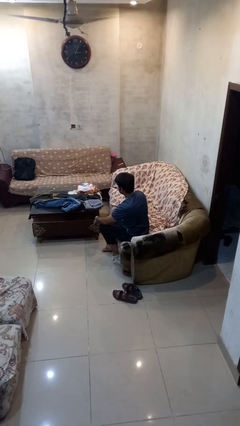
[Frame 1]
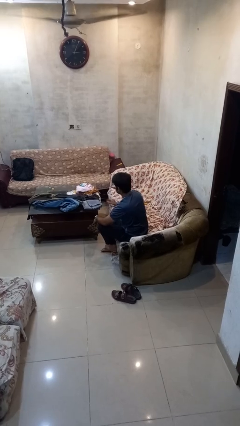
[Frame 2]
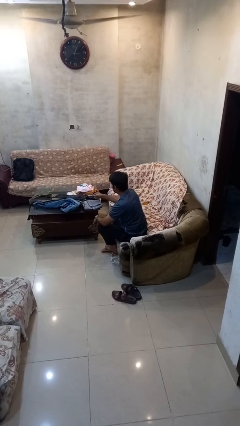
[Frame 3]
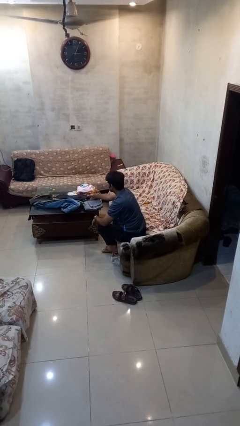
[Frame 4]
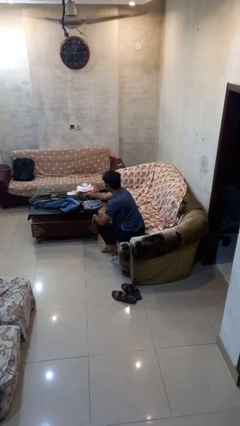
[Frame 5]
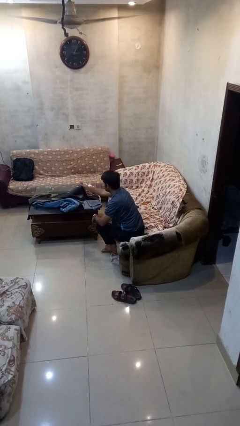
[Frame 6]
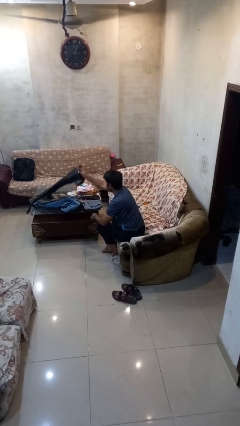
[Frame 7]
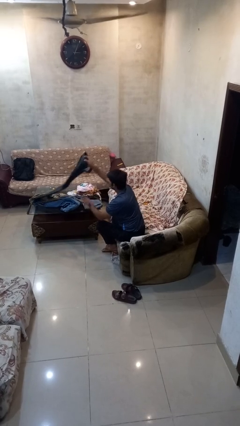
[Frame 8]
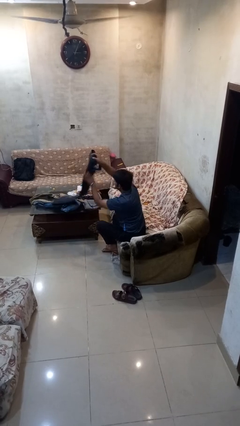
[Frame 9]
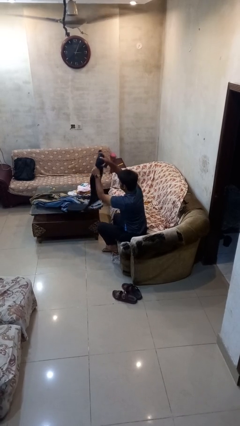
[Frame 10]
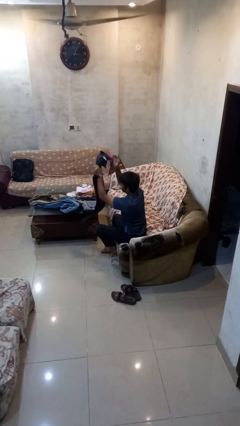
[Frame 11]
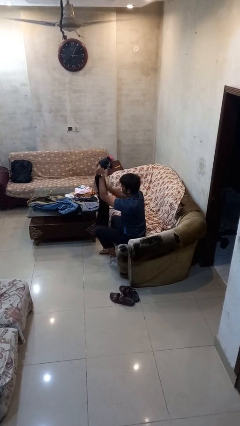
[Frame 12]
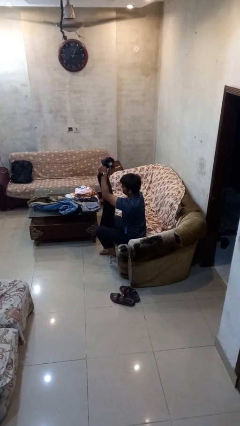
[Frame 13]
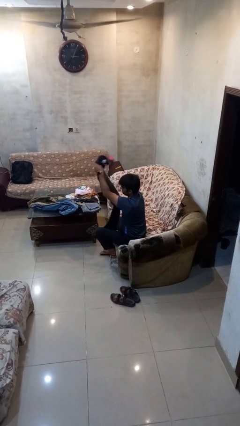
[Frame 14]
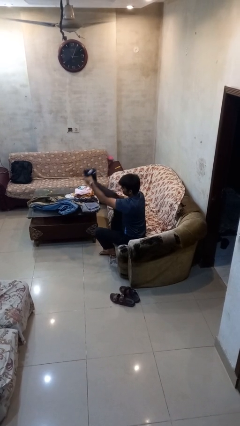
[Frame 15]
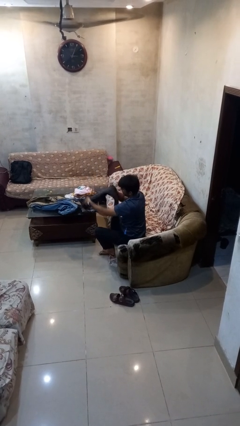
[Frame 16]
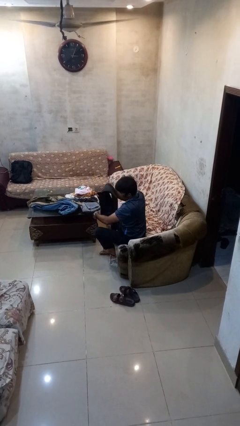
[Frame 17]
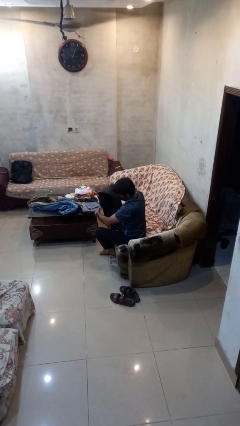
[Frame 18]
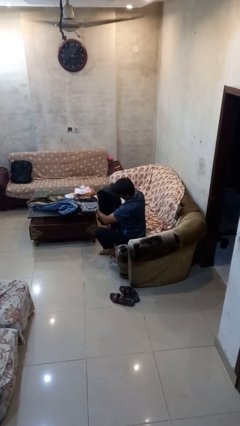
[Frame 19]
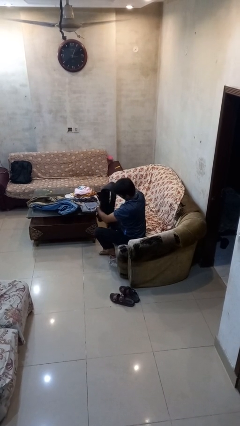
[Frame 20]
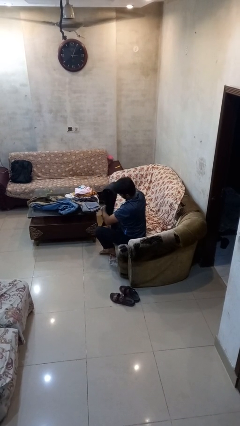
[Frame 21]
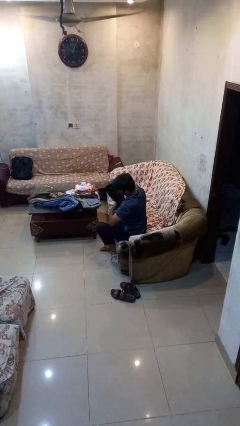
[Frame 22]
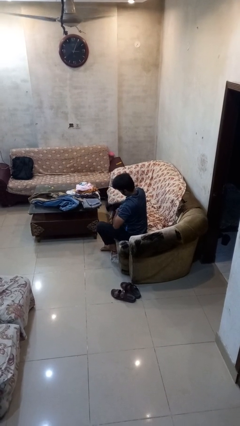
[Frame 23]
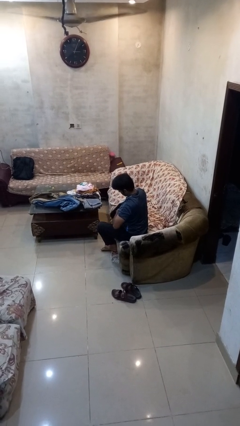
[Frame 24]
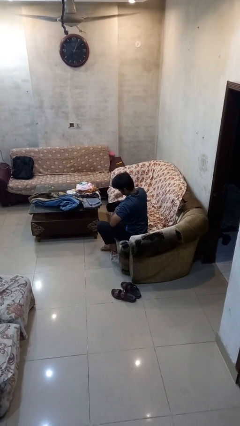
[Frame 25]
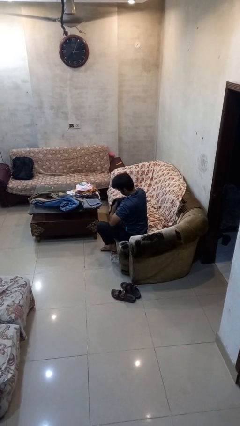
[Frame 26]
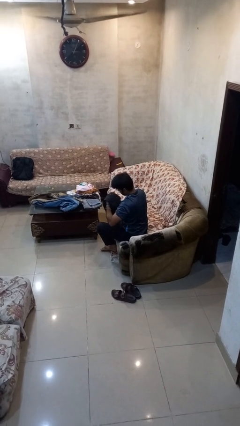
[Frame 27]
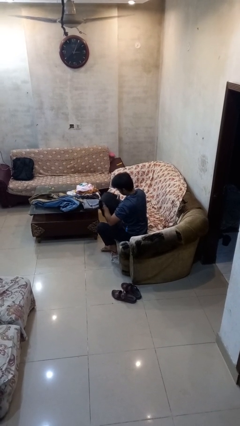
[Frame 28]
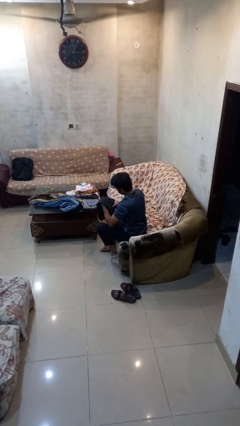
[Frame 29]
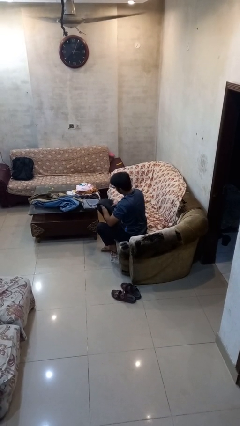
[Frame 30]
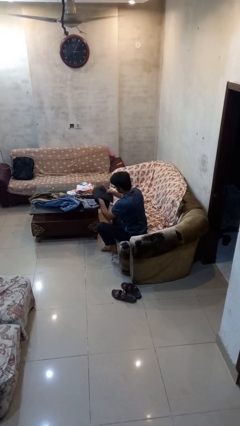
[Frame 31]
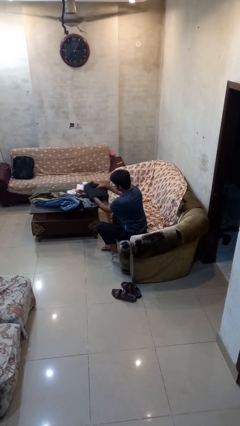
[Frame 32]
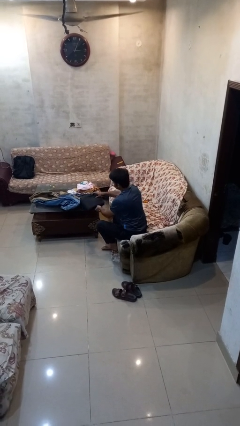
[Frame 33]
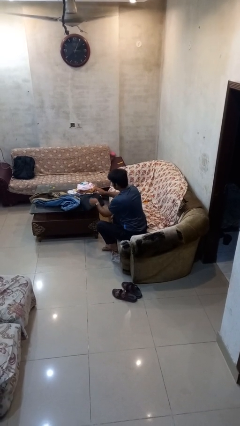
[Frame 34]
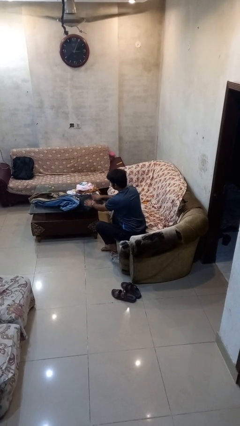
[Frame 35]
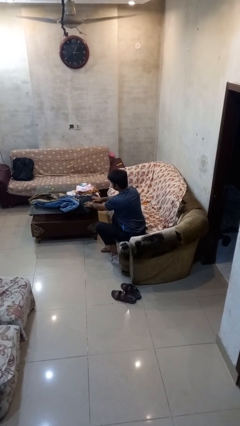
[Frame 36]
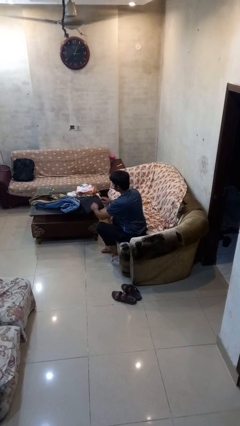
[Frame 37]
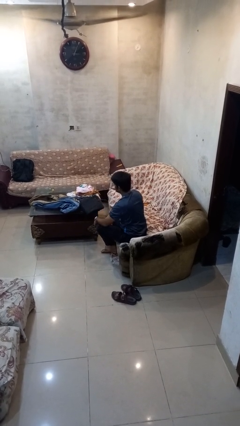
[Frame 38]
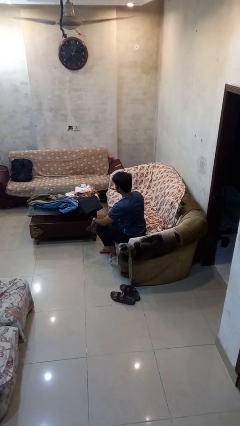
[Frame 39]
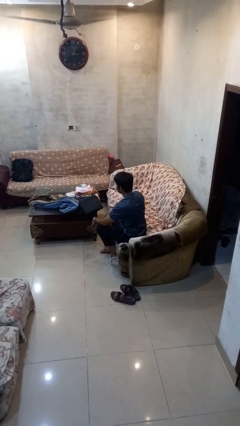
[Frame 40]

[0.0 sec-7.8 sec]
person folds pants

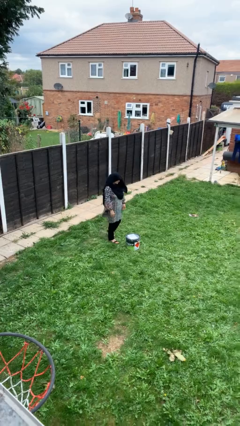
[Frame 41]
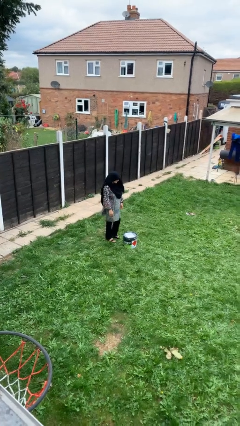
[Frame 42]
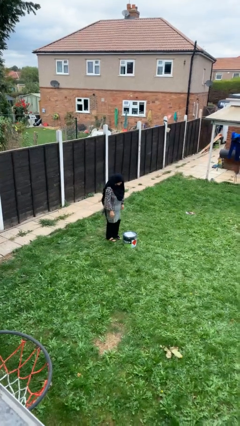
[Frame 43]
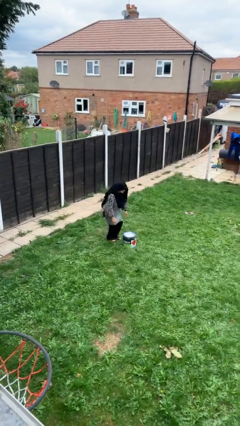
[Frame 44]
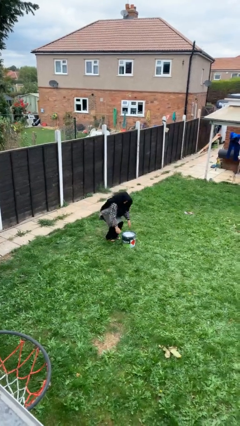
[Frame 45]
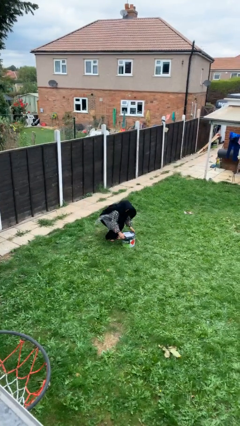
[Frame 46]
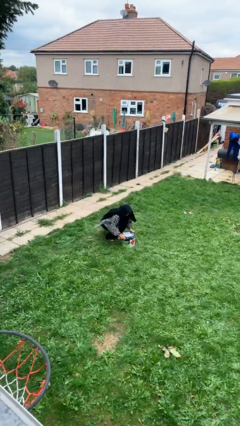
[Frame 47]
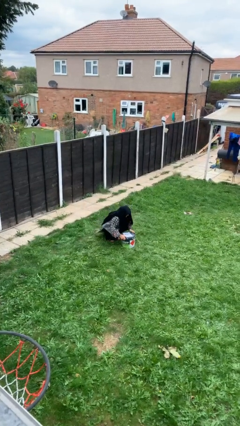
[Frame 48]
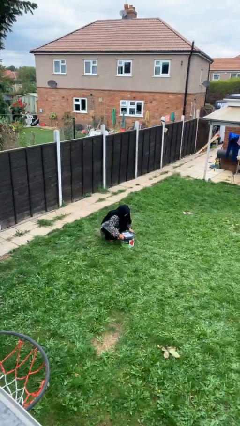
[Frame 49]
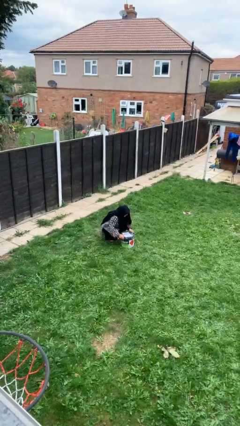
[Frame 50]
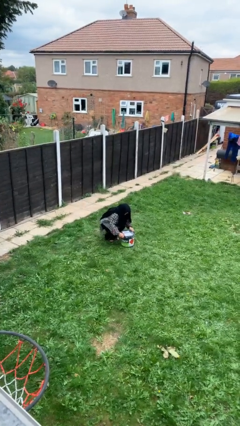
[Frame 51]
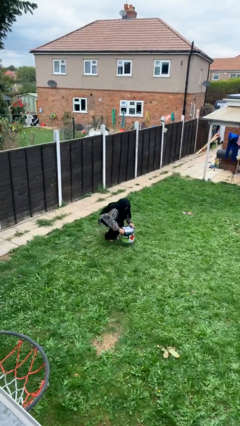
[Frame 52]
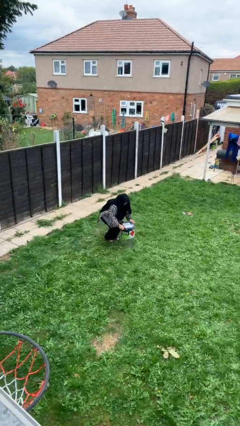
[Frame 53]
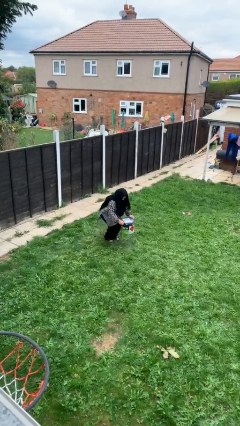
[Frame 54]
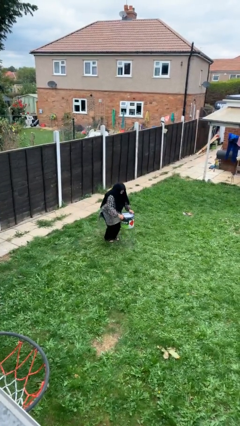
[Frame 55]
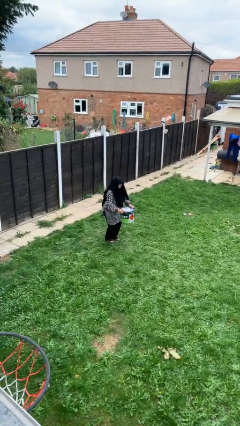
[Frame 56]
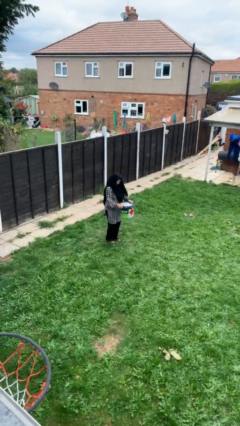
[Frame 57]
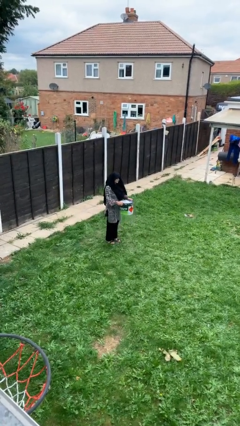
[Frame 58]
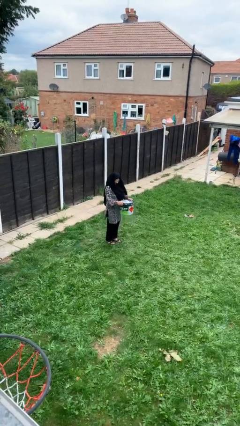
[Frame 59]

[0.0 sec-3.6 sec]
person picks up object from floor

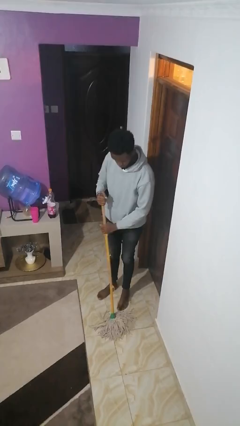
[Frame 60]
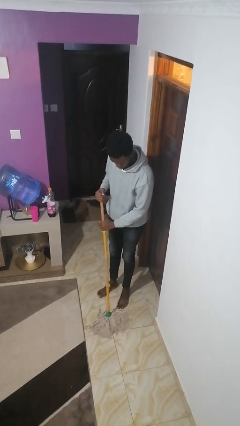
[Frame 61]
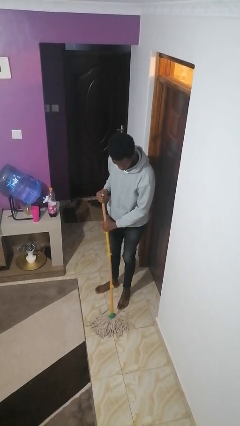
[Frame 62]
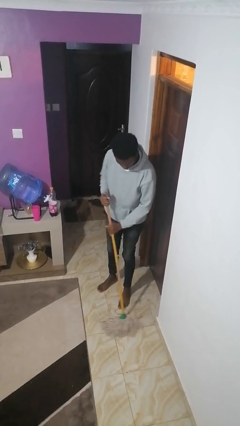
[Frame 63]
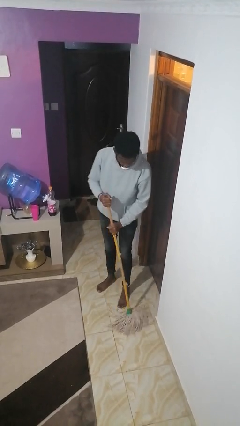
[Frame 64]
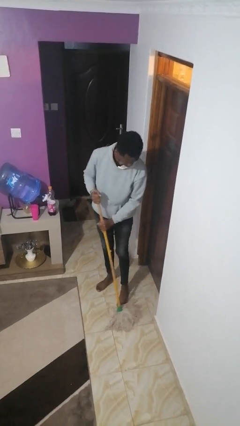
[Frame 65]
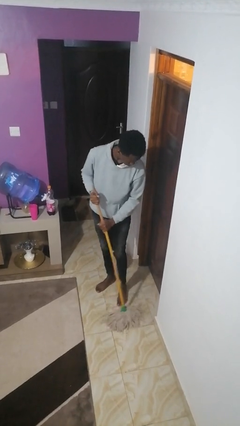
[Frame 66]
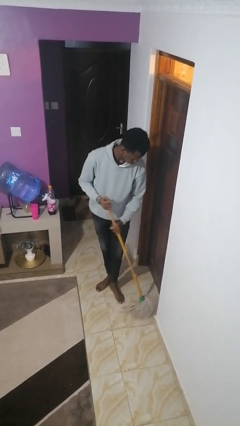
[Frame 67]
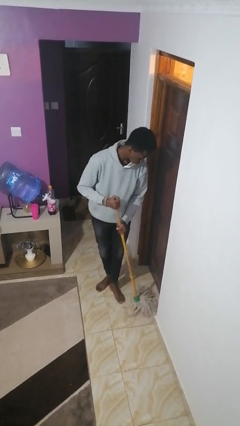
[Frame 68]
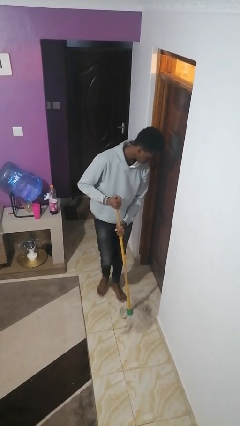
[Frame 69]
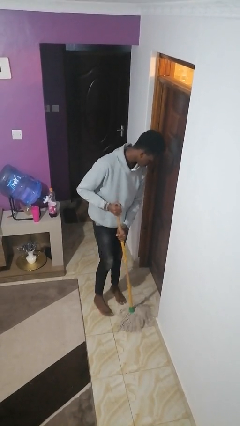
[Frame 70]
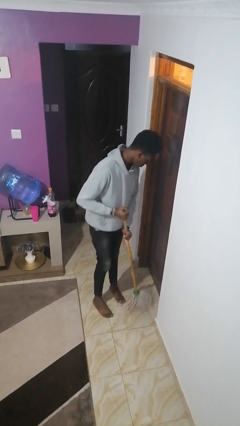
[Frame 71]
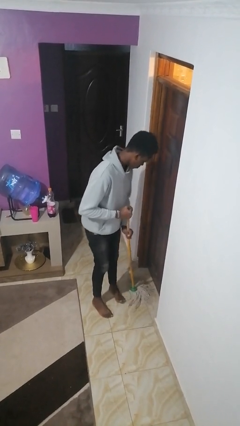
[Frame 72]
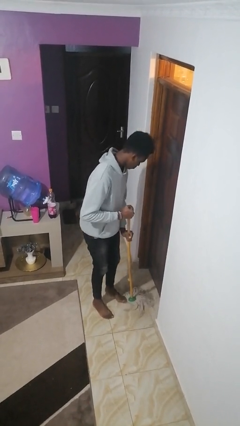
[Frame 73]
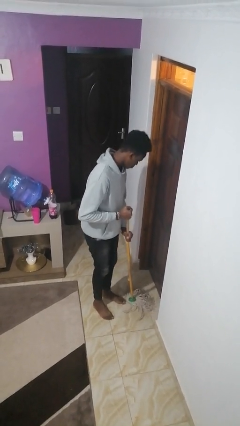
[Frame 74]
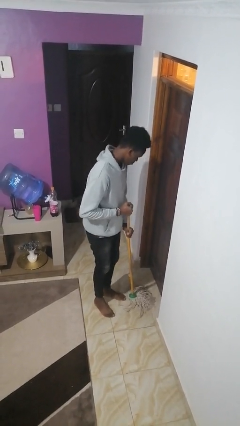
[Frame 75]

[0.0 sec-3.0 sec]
person mops

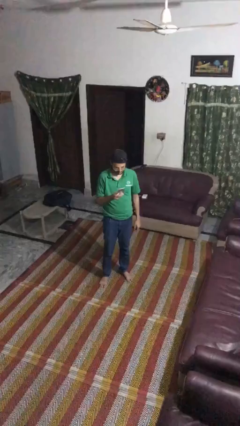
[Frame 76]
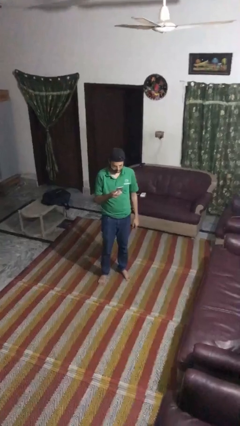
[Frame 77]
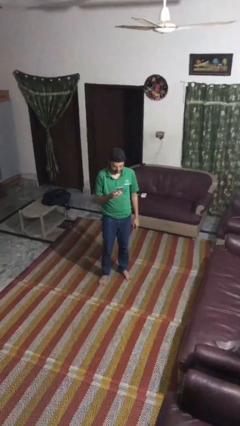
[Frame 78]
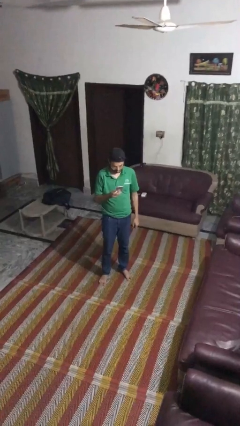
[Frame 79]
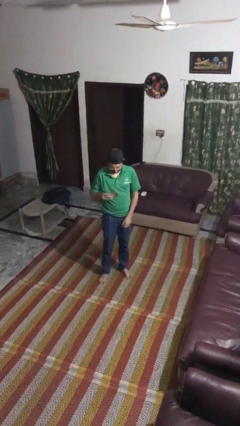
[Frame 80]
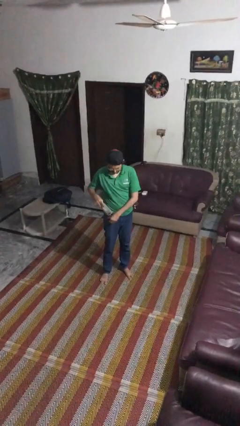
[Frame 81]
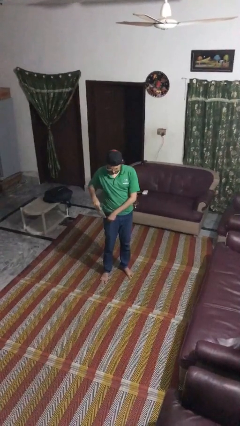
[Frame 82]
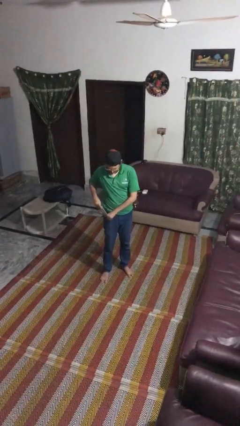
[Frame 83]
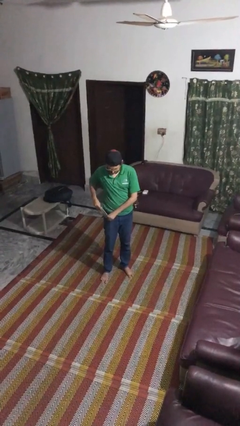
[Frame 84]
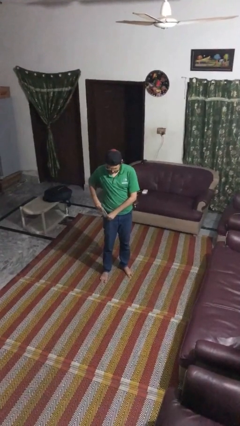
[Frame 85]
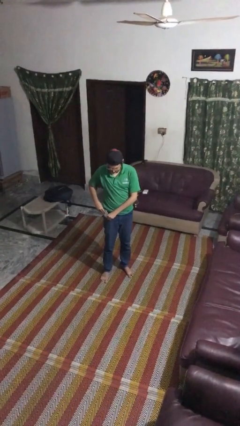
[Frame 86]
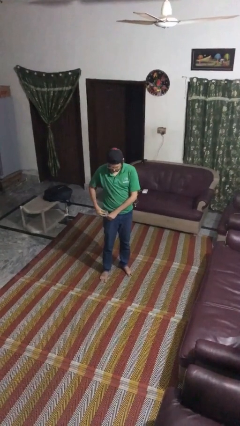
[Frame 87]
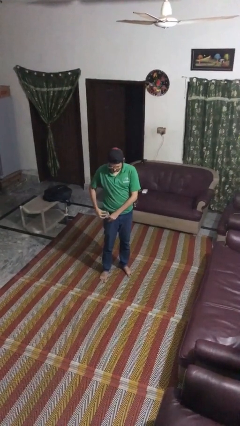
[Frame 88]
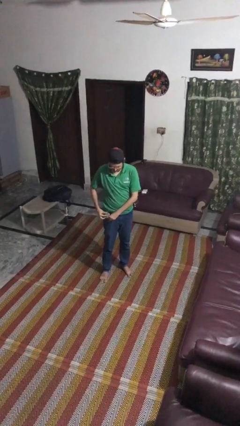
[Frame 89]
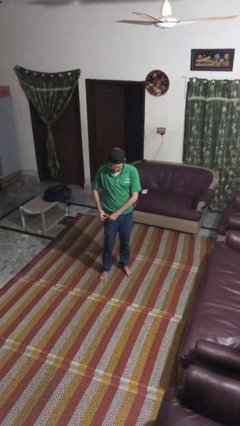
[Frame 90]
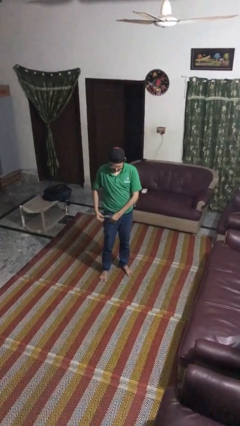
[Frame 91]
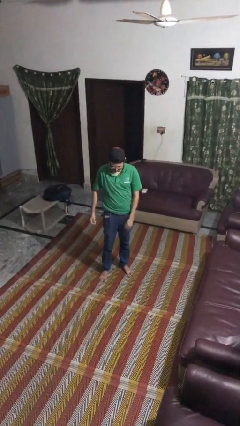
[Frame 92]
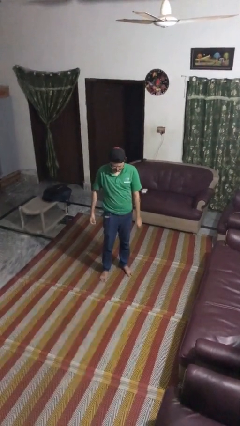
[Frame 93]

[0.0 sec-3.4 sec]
person puts phone into pocket
